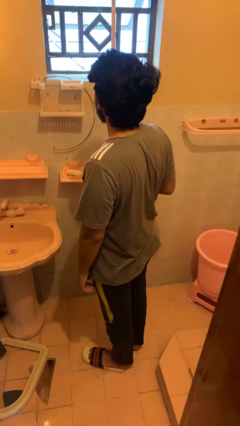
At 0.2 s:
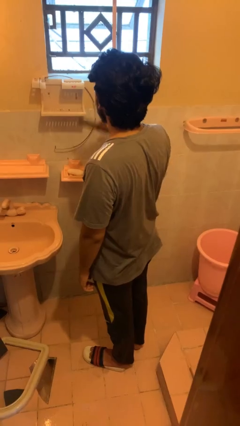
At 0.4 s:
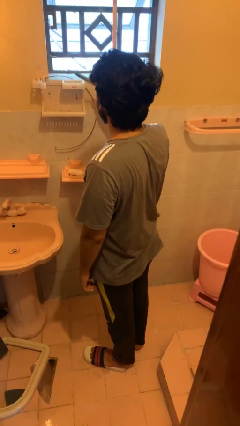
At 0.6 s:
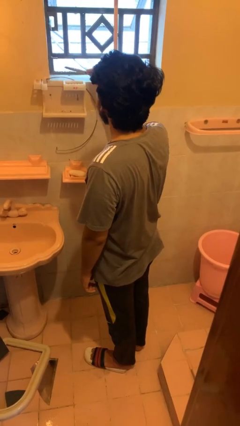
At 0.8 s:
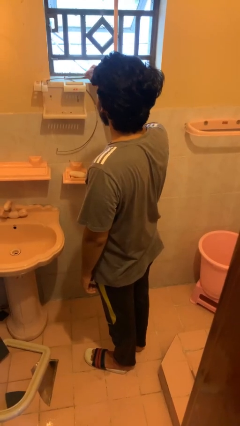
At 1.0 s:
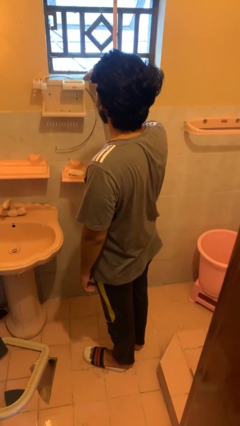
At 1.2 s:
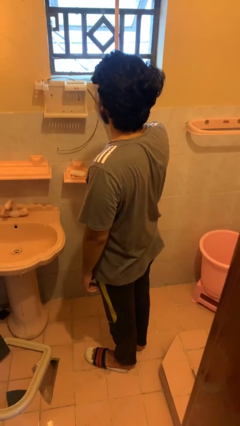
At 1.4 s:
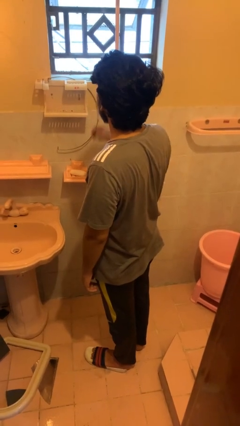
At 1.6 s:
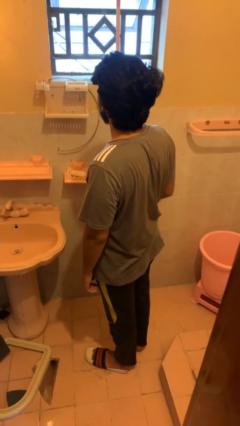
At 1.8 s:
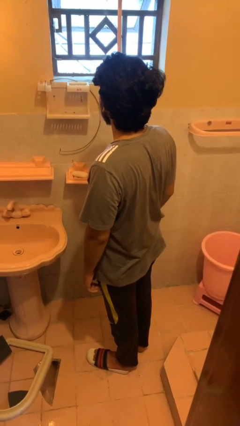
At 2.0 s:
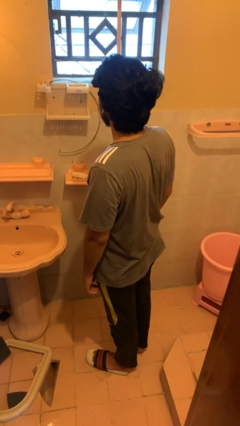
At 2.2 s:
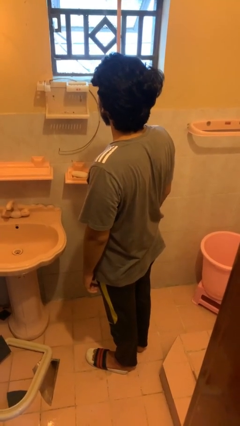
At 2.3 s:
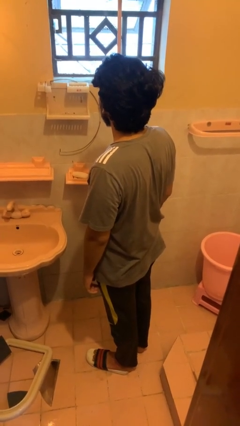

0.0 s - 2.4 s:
person puts down object on countertop

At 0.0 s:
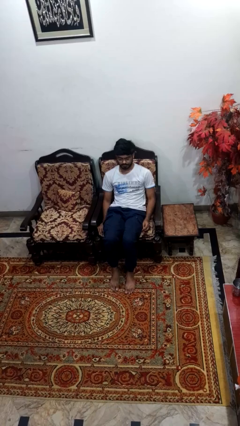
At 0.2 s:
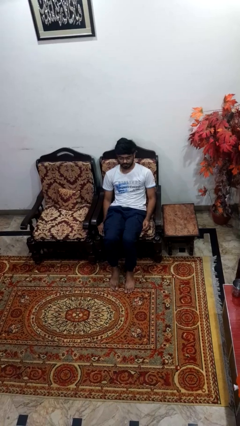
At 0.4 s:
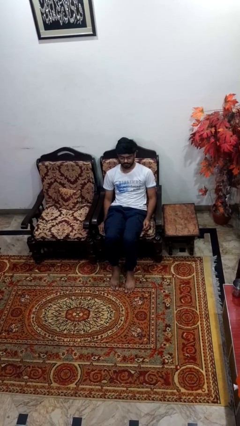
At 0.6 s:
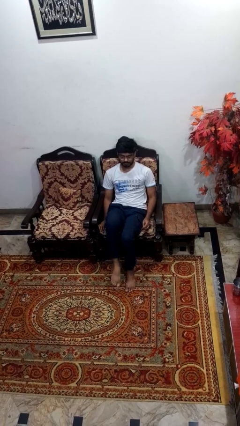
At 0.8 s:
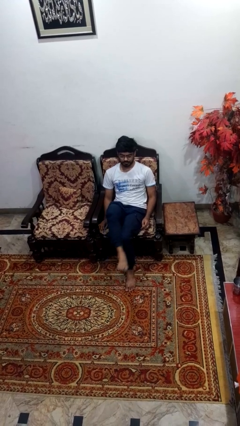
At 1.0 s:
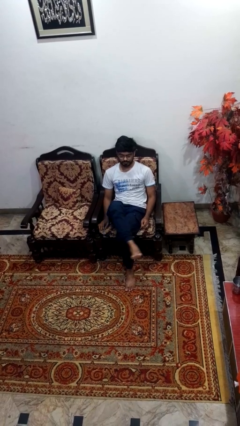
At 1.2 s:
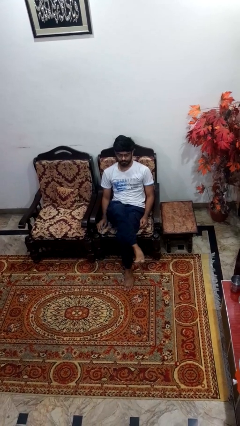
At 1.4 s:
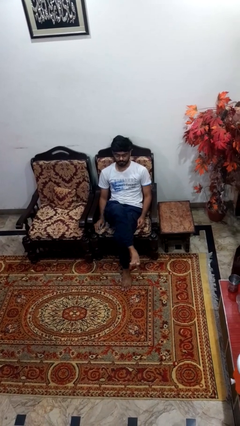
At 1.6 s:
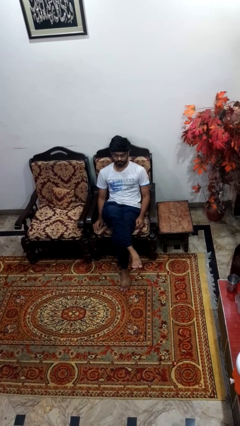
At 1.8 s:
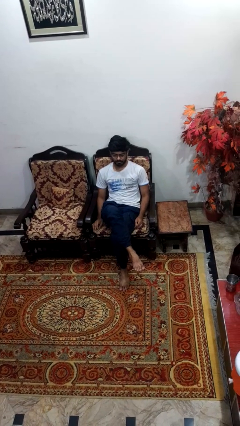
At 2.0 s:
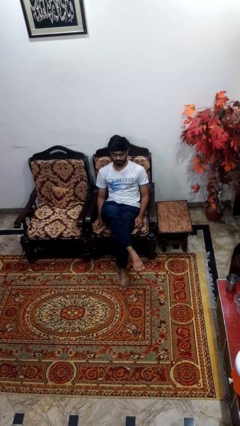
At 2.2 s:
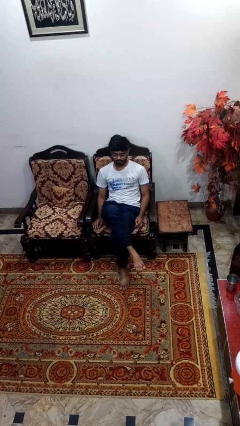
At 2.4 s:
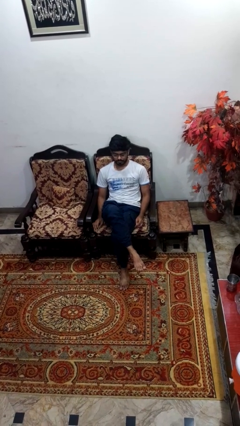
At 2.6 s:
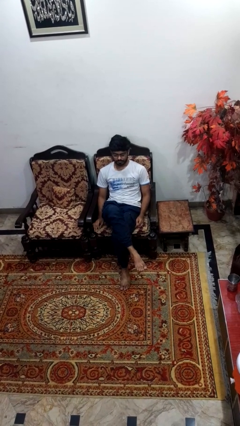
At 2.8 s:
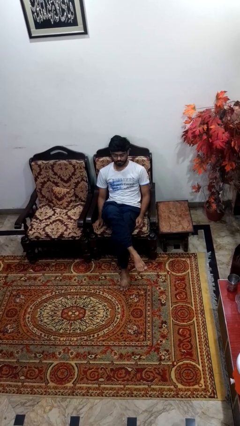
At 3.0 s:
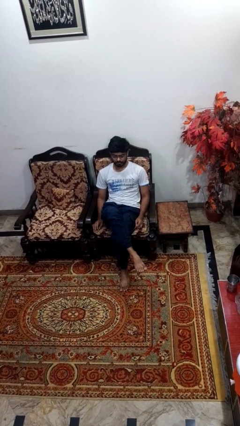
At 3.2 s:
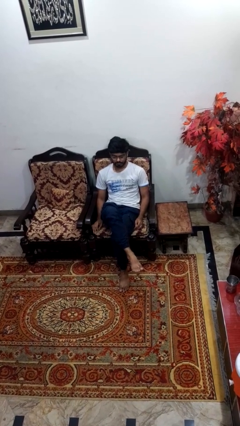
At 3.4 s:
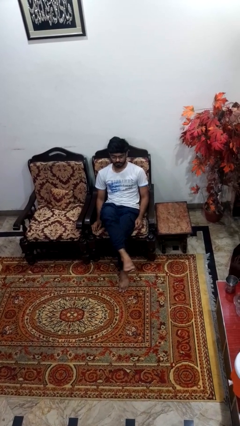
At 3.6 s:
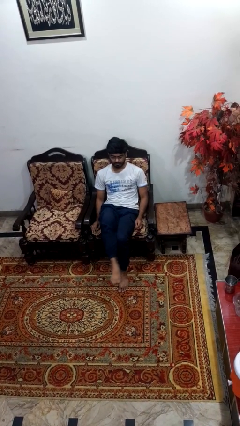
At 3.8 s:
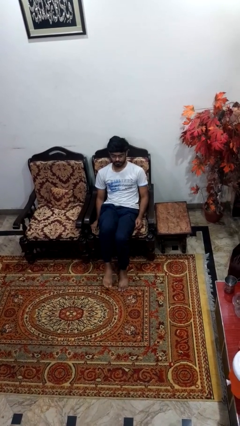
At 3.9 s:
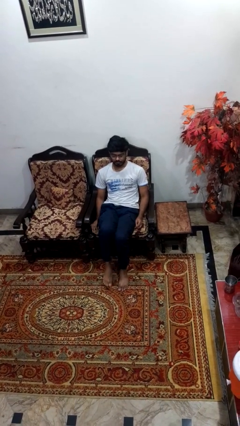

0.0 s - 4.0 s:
person crosses legs

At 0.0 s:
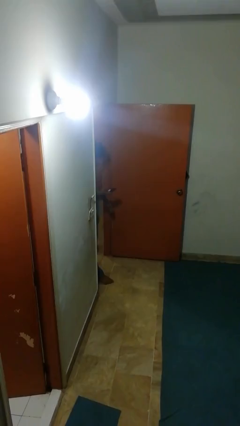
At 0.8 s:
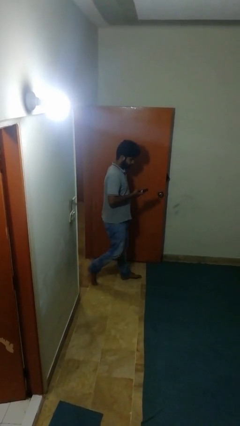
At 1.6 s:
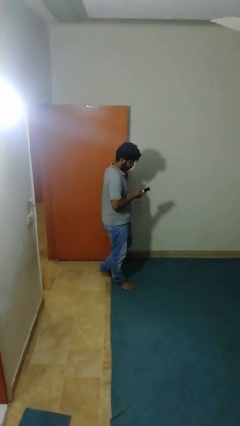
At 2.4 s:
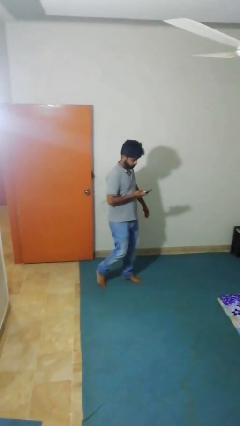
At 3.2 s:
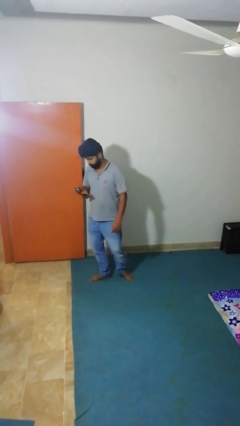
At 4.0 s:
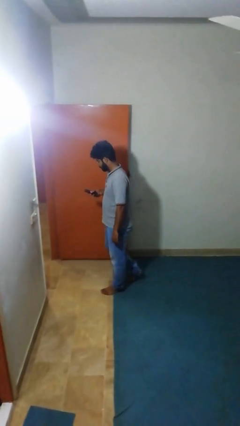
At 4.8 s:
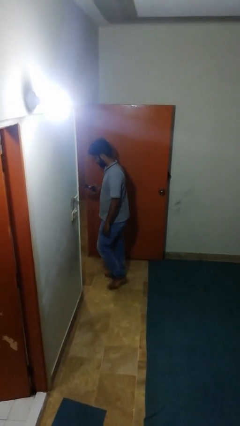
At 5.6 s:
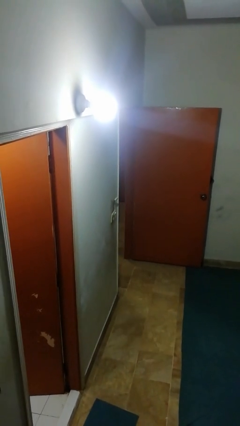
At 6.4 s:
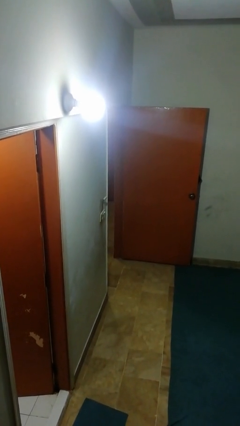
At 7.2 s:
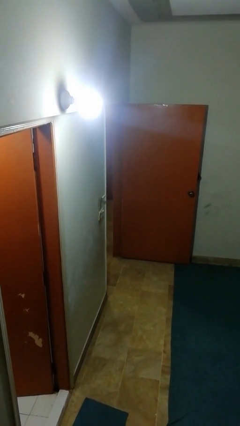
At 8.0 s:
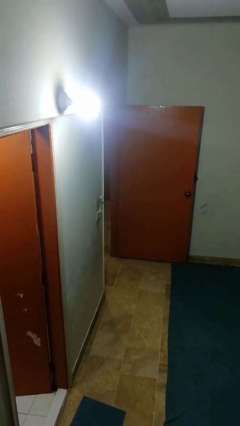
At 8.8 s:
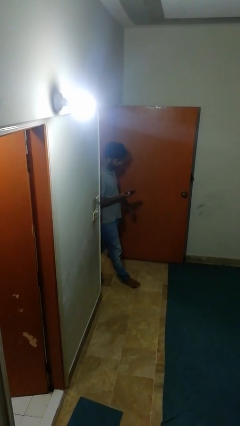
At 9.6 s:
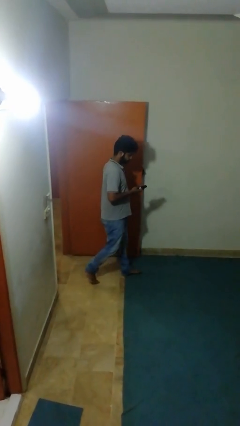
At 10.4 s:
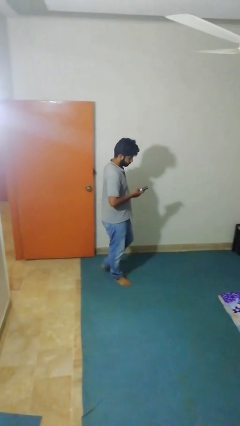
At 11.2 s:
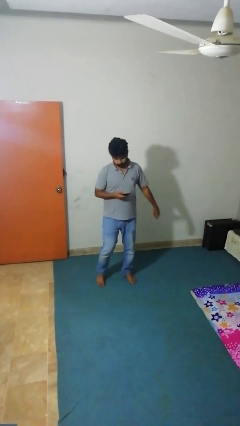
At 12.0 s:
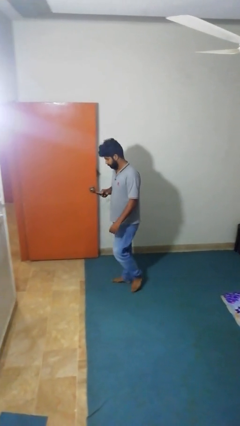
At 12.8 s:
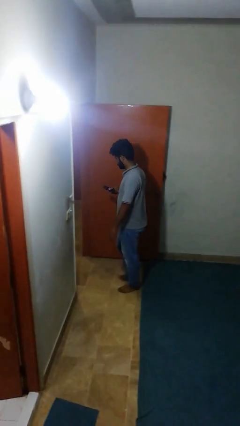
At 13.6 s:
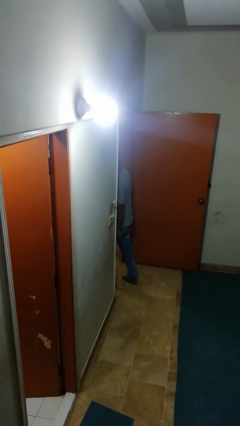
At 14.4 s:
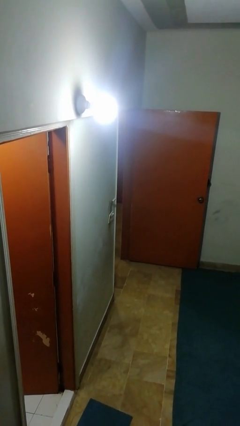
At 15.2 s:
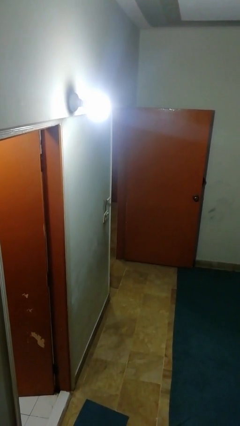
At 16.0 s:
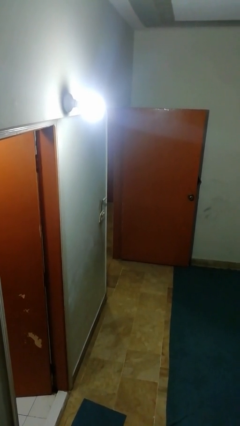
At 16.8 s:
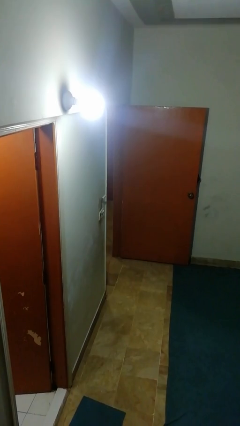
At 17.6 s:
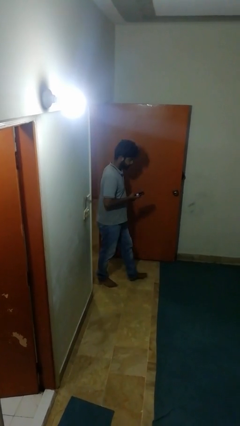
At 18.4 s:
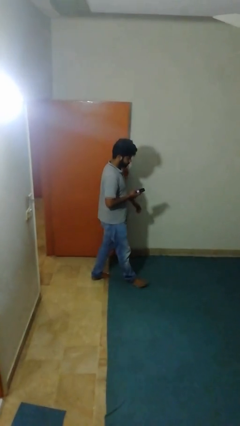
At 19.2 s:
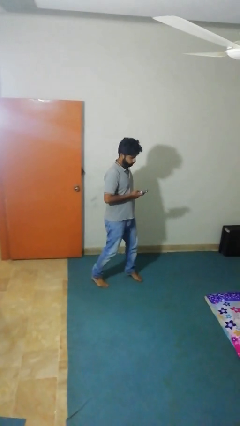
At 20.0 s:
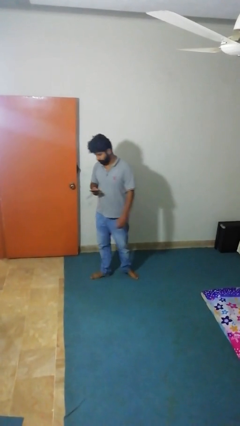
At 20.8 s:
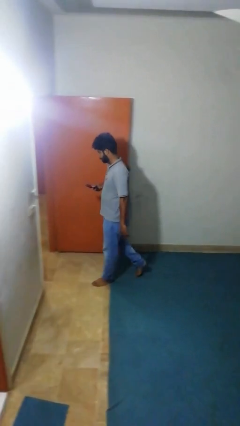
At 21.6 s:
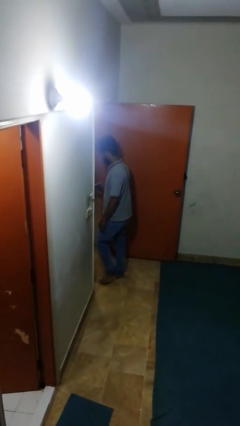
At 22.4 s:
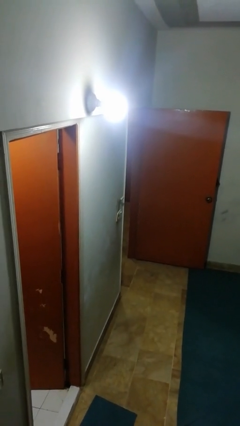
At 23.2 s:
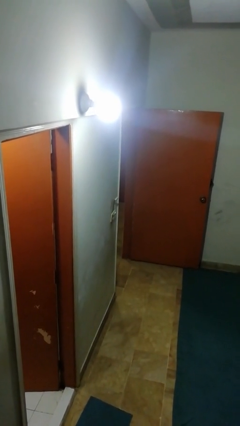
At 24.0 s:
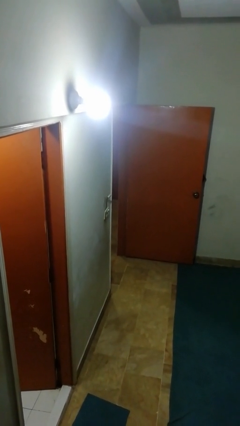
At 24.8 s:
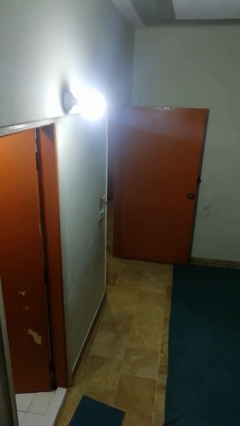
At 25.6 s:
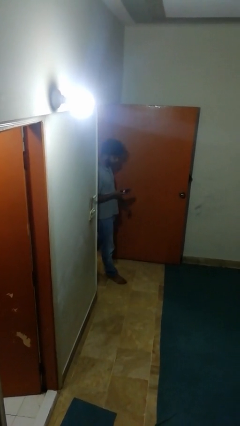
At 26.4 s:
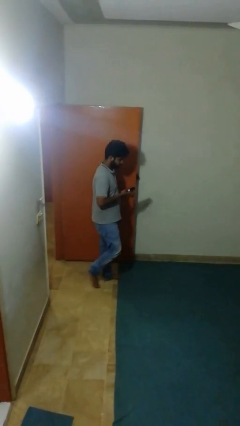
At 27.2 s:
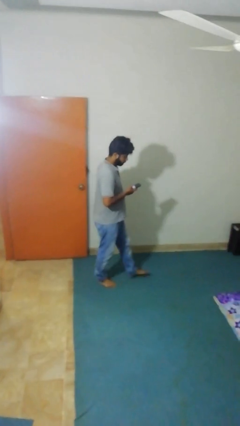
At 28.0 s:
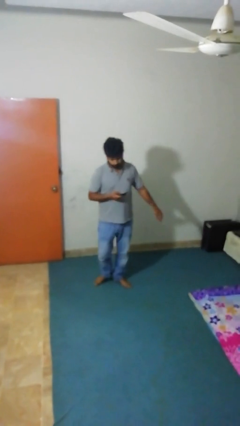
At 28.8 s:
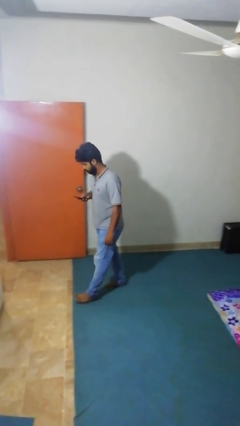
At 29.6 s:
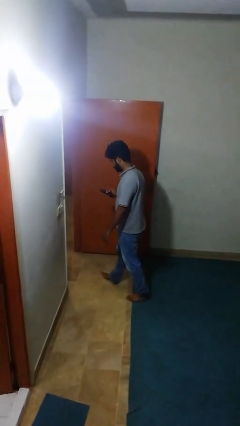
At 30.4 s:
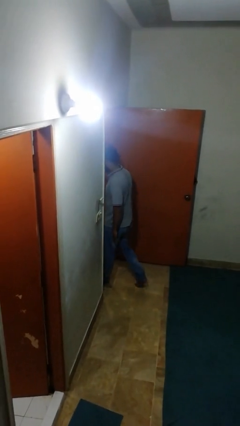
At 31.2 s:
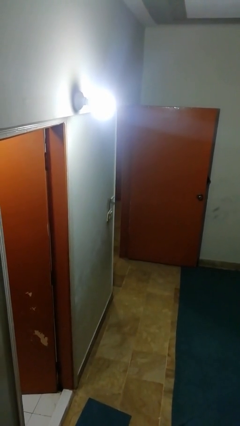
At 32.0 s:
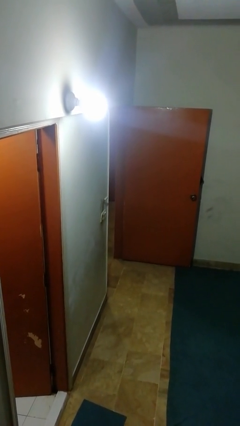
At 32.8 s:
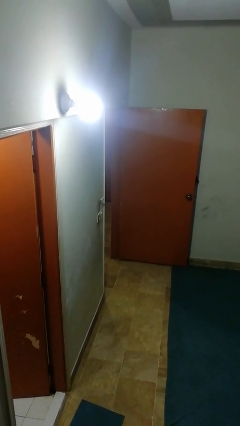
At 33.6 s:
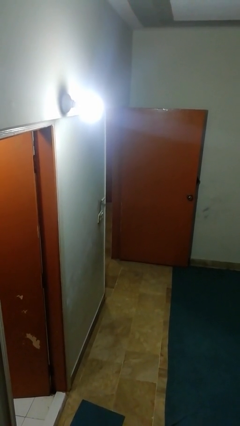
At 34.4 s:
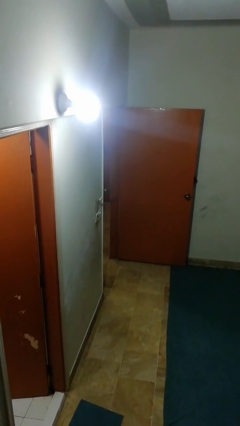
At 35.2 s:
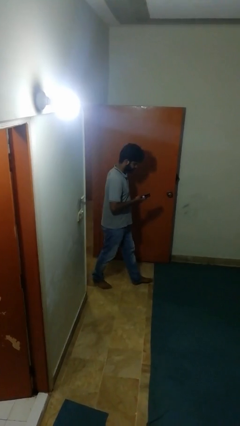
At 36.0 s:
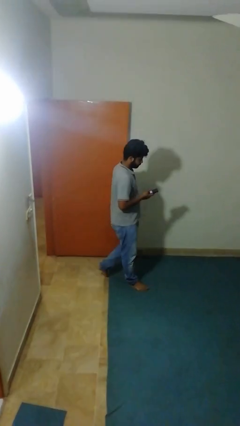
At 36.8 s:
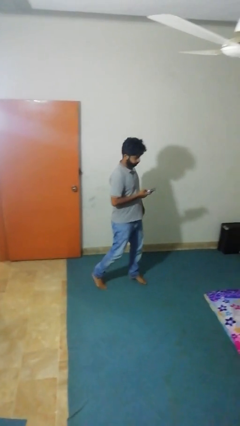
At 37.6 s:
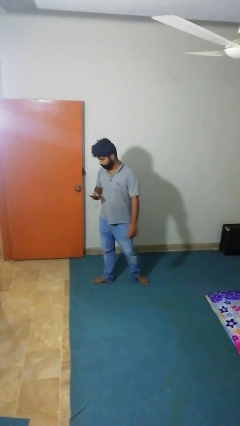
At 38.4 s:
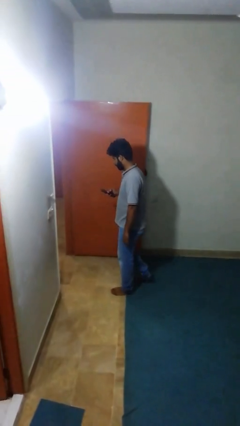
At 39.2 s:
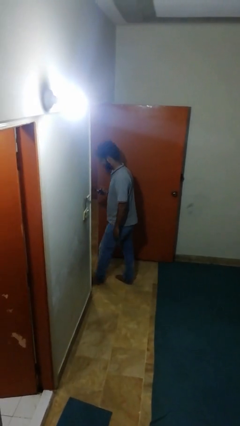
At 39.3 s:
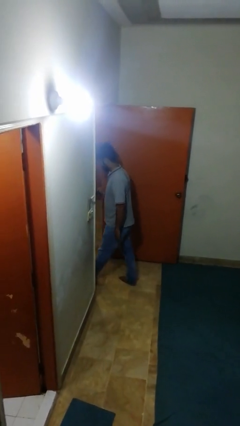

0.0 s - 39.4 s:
person texts on phone

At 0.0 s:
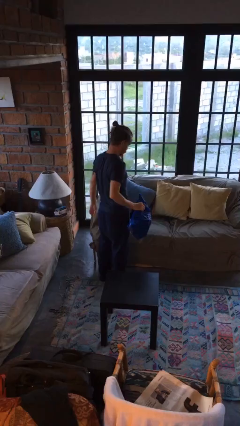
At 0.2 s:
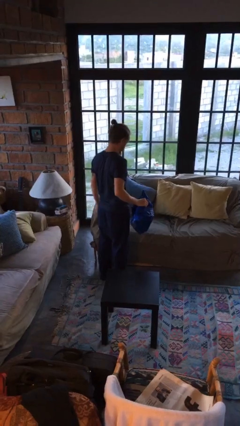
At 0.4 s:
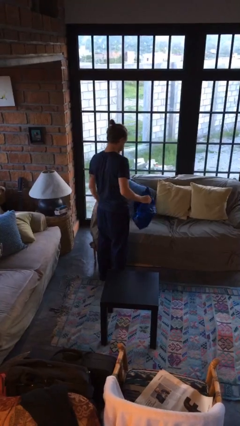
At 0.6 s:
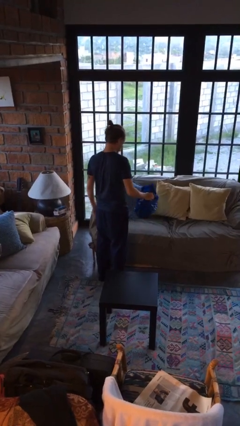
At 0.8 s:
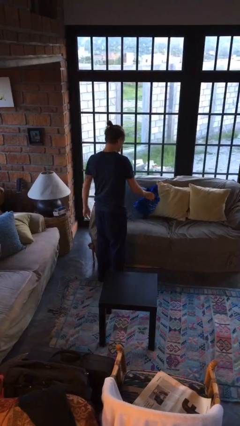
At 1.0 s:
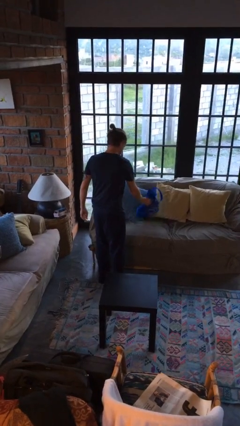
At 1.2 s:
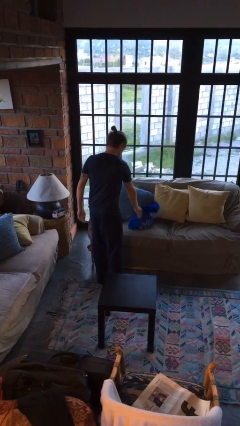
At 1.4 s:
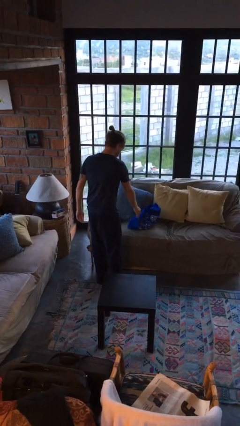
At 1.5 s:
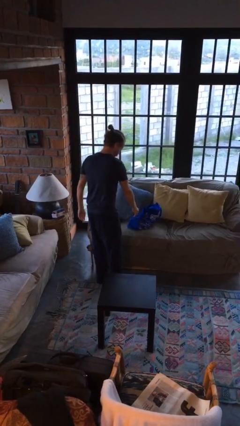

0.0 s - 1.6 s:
person puts down object on couch
